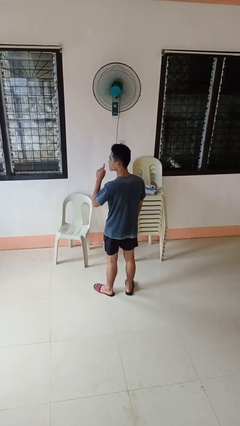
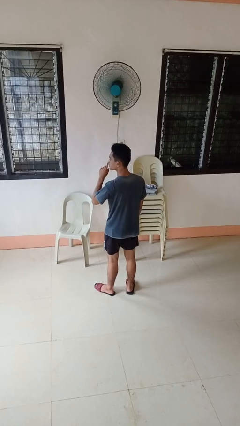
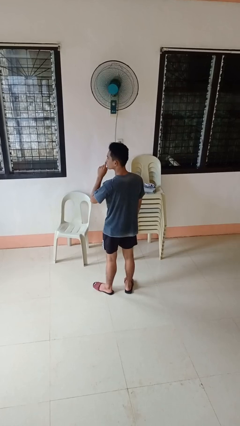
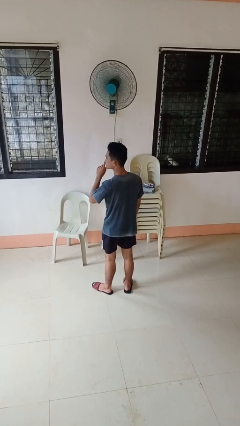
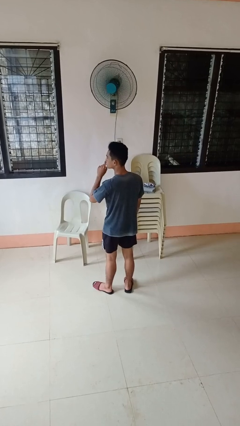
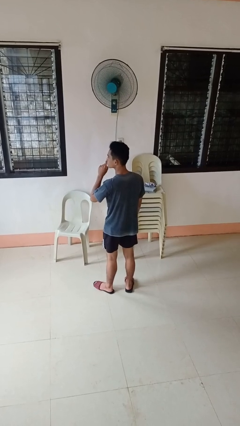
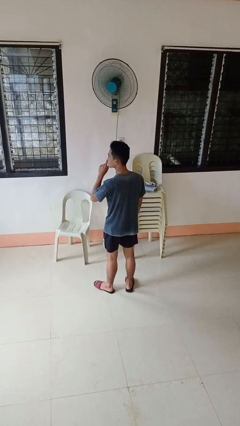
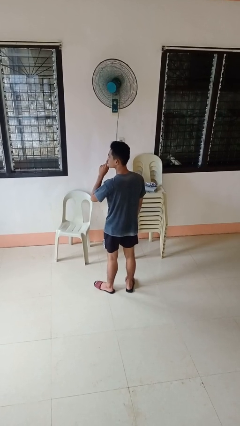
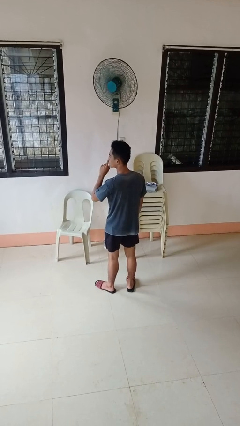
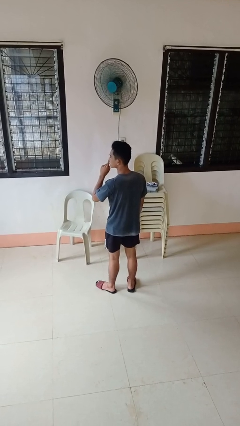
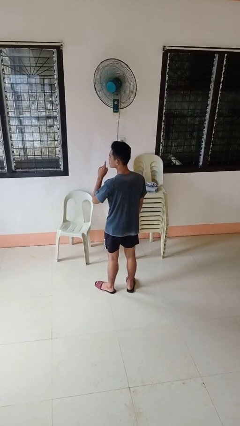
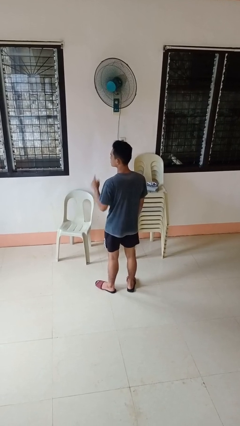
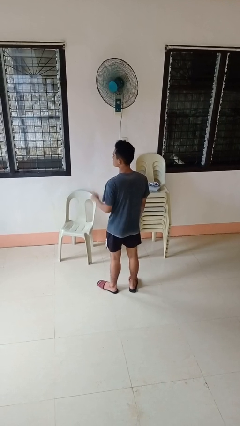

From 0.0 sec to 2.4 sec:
person gestures be quiet

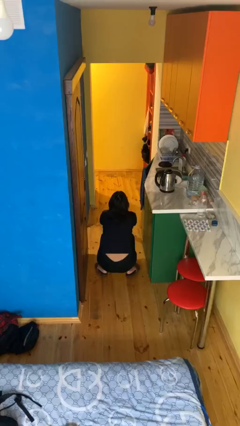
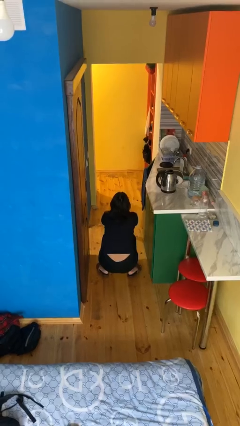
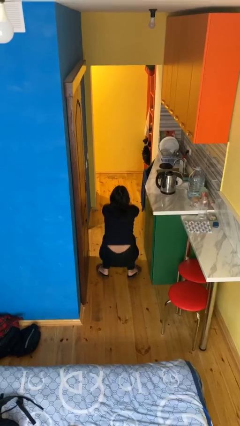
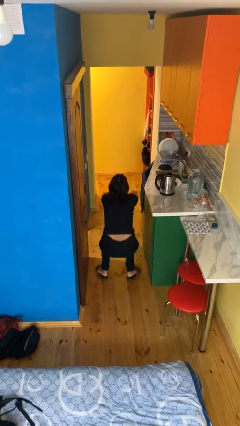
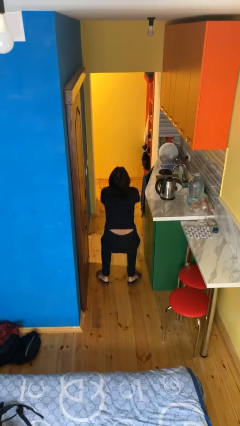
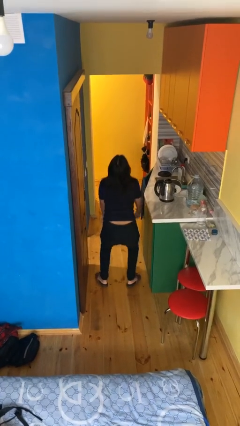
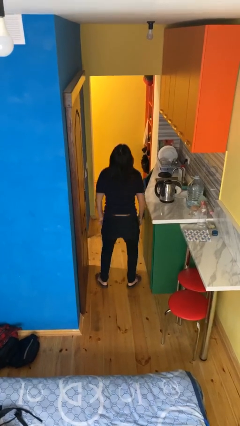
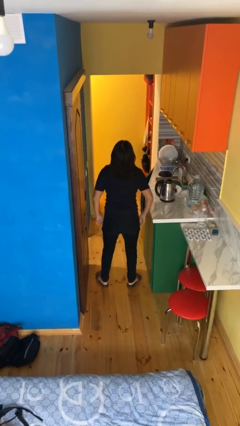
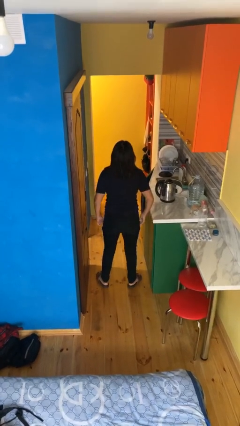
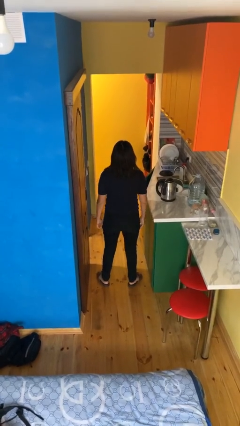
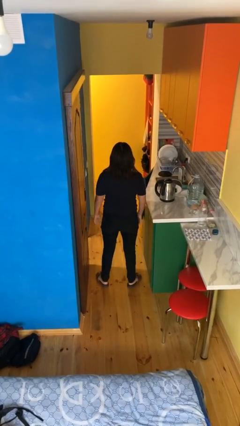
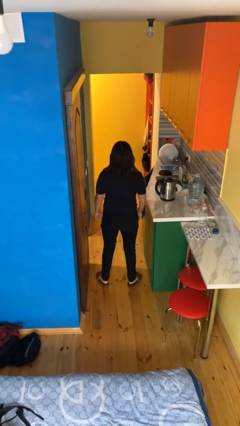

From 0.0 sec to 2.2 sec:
person stands up

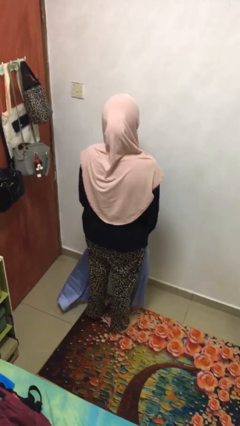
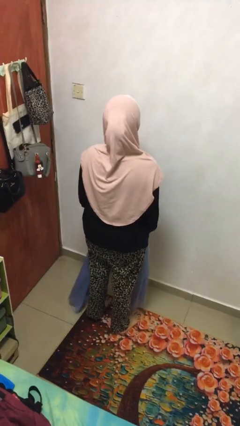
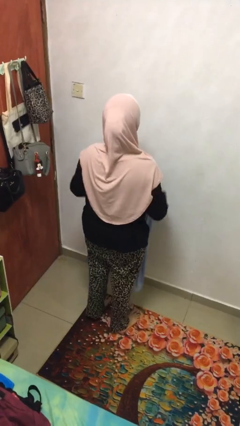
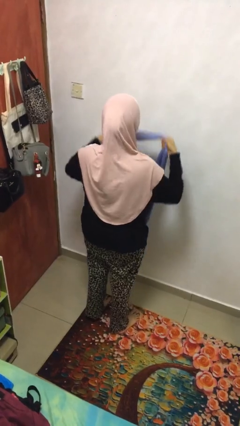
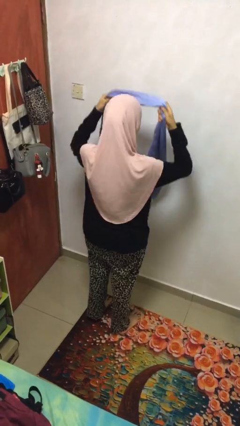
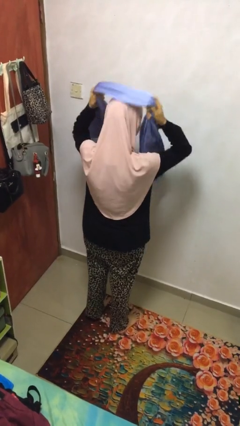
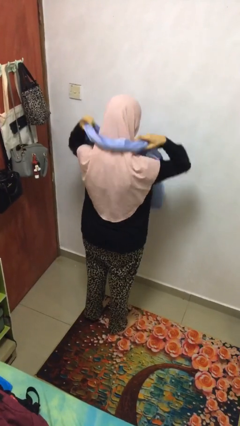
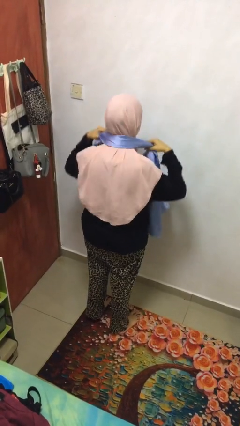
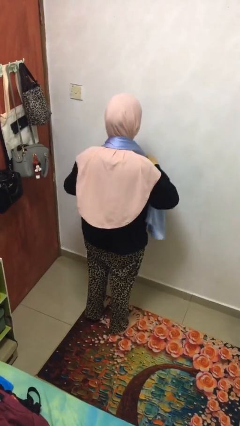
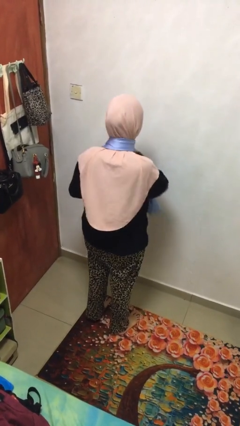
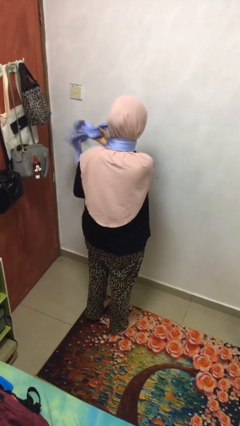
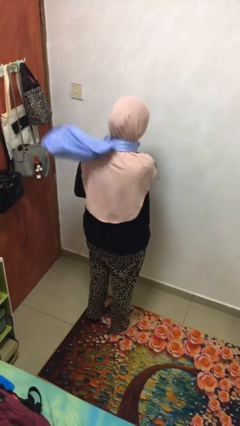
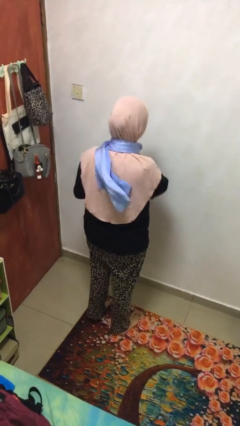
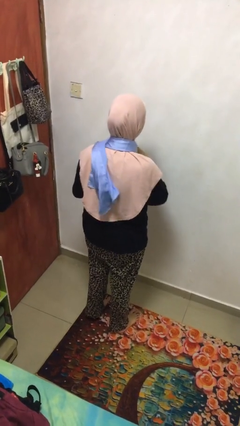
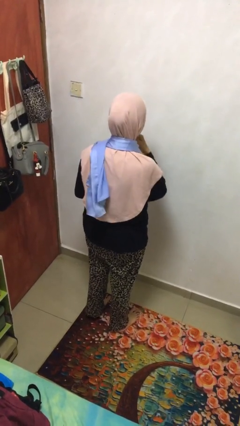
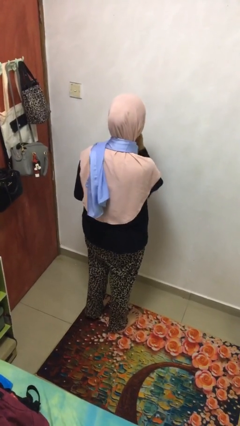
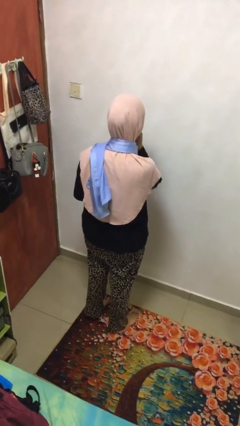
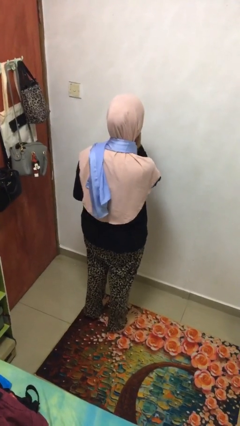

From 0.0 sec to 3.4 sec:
person puts on scarf

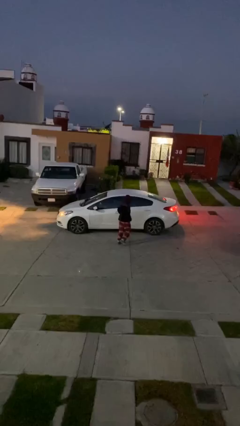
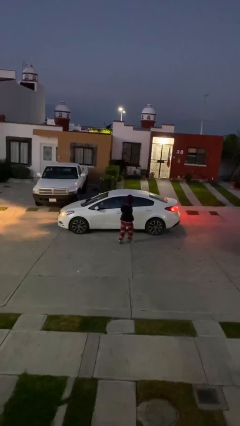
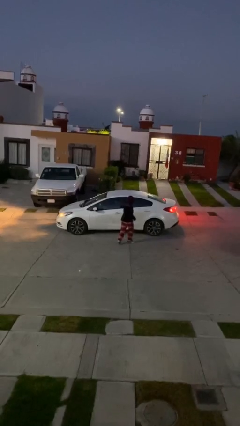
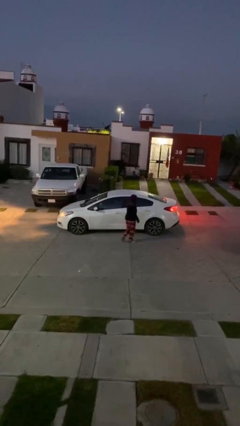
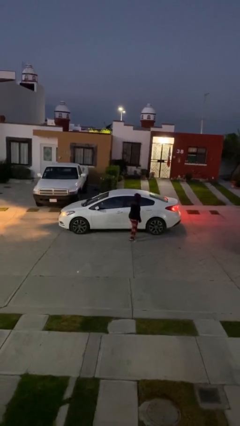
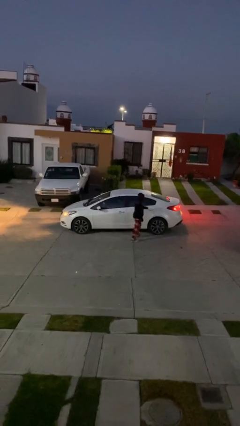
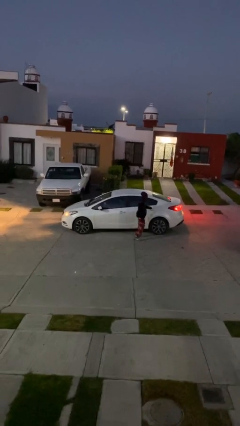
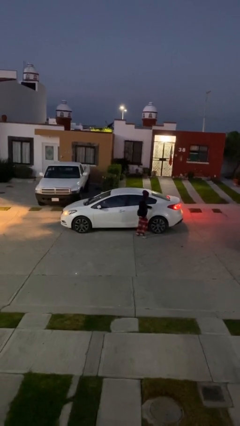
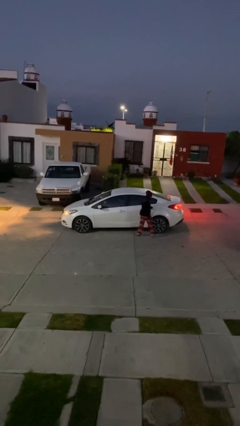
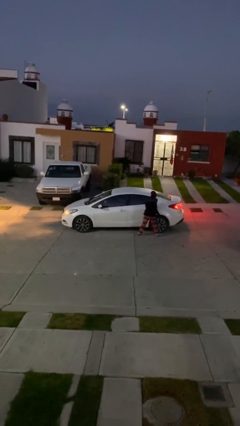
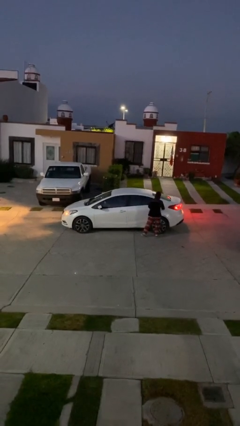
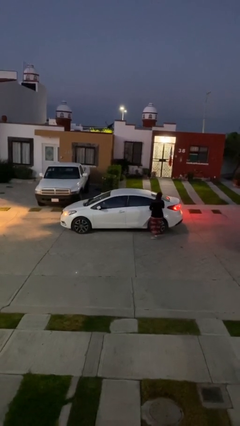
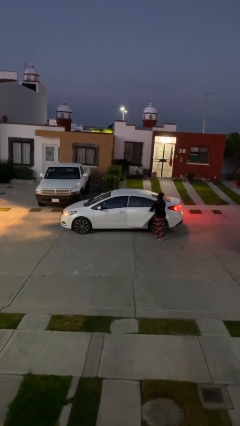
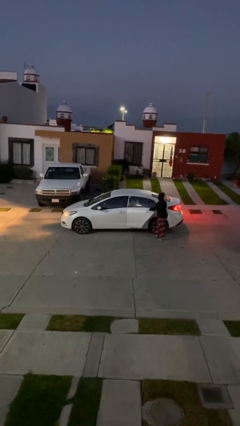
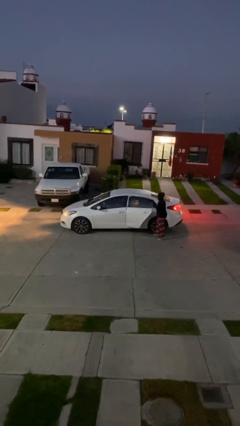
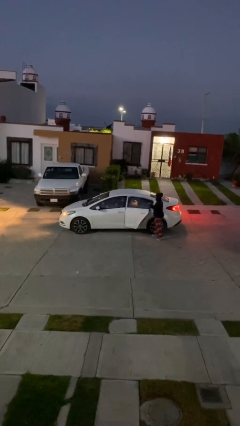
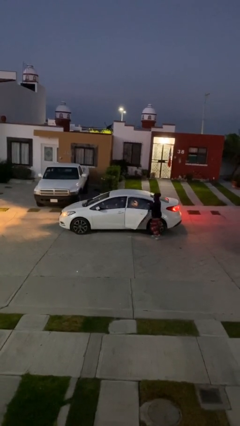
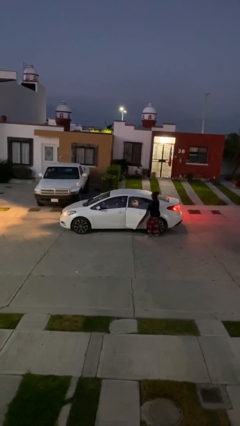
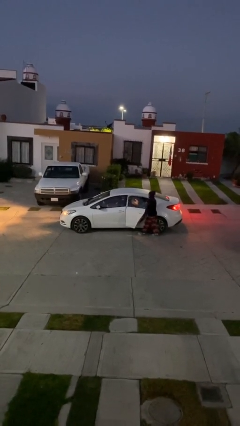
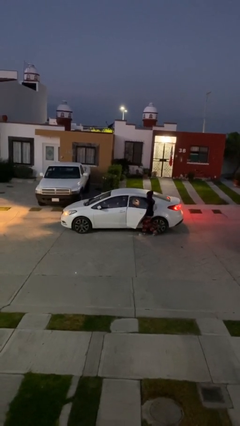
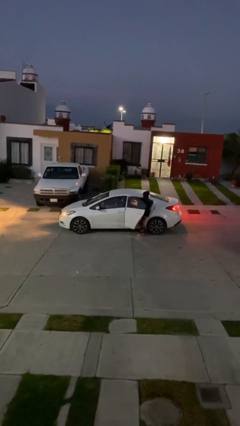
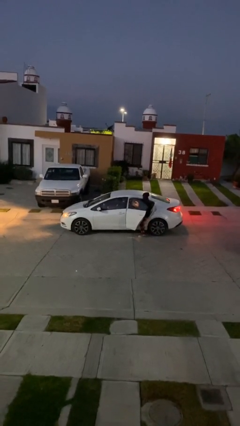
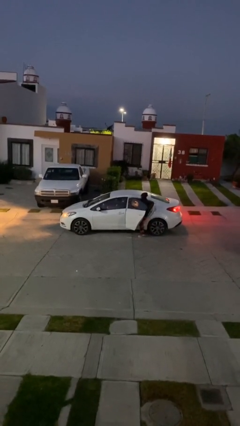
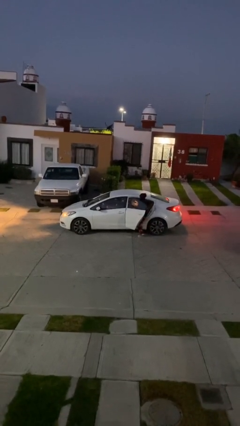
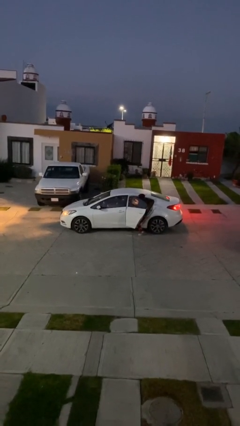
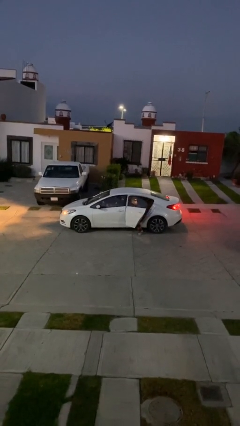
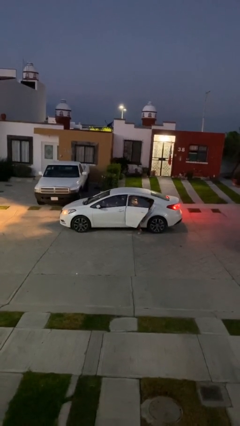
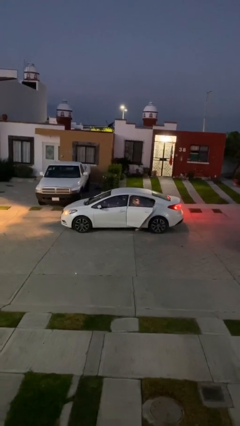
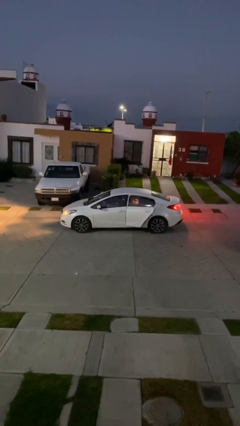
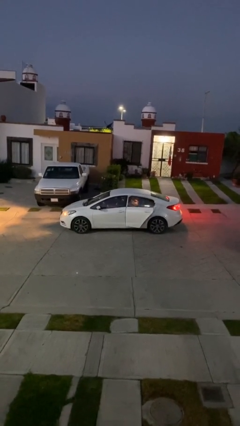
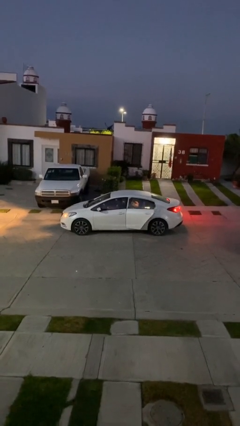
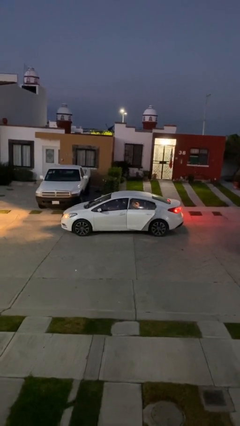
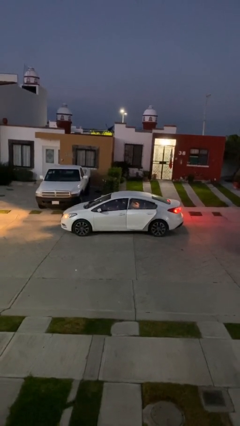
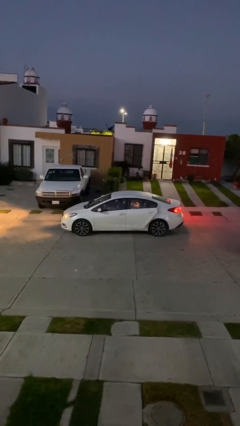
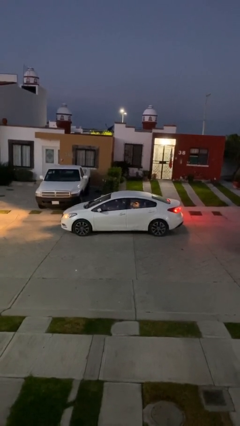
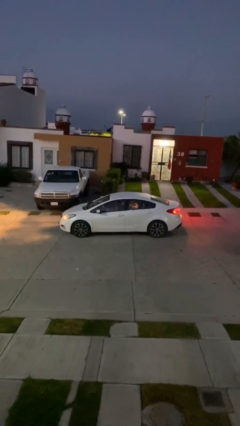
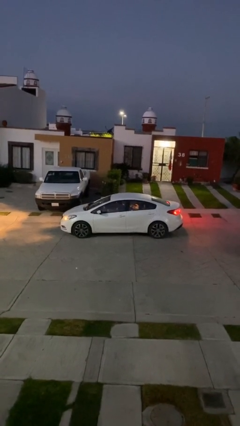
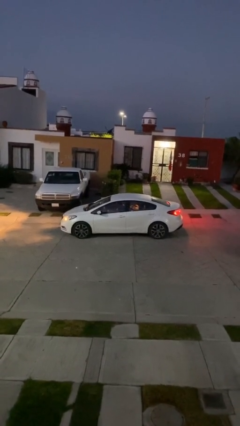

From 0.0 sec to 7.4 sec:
car picks up person

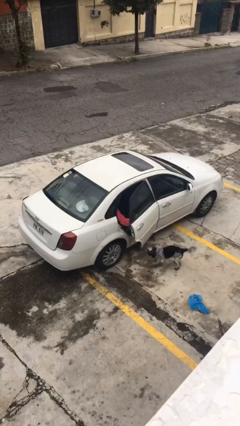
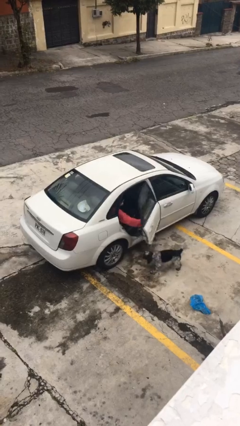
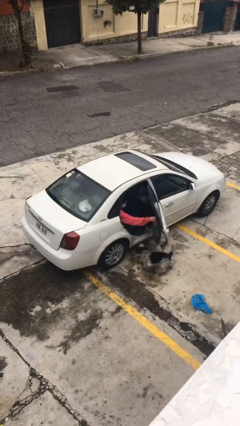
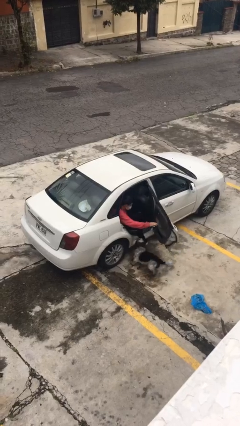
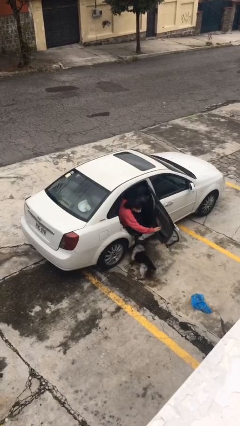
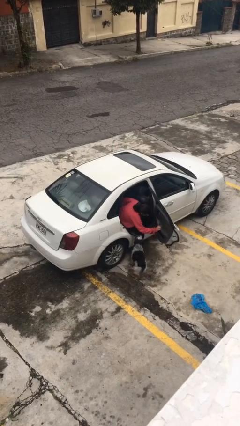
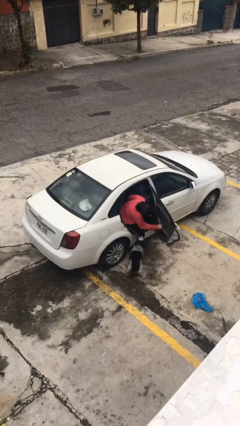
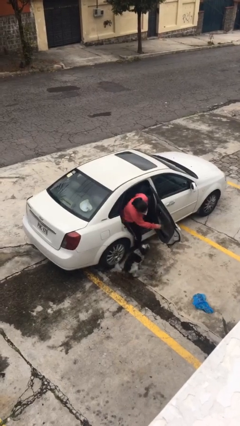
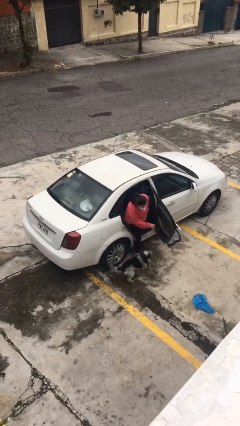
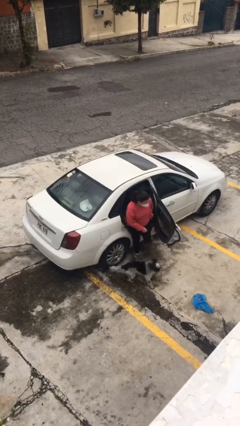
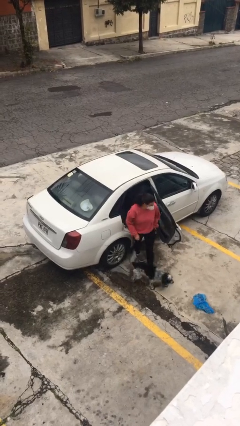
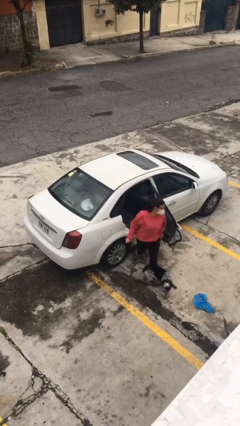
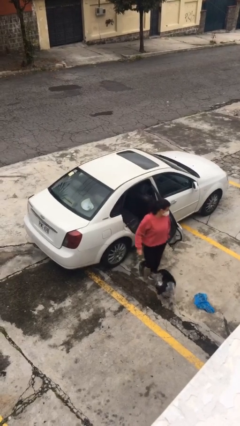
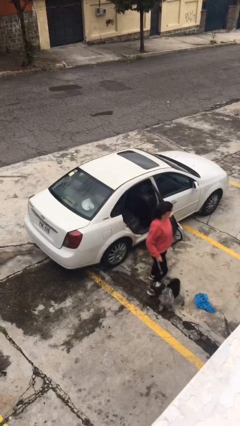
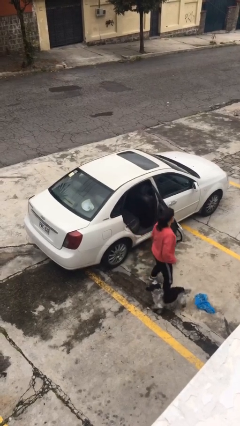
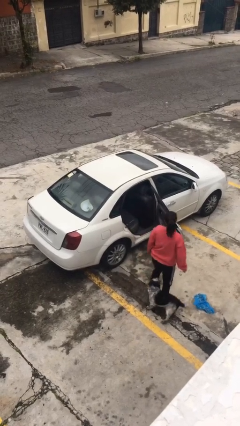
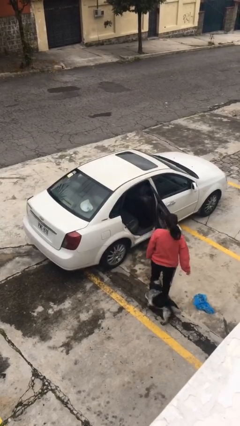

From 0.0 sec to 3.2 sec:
car drops off person
